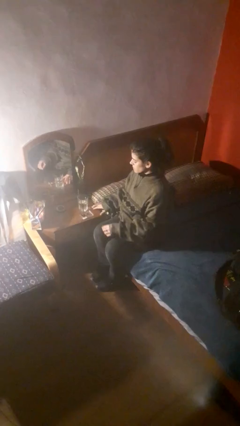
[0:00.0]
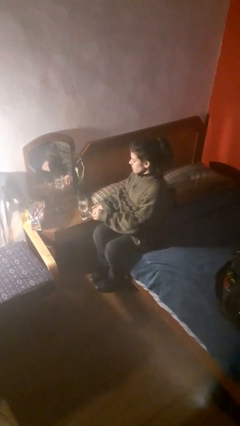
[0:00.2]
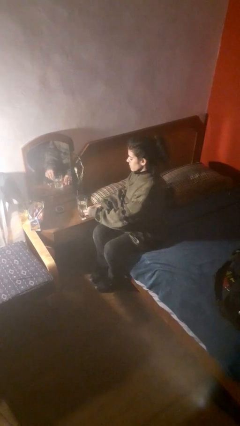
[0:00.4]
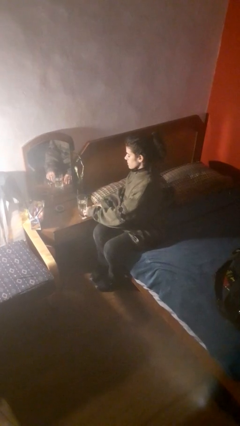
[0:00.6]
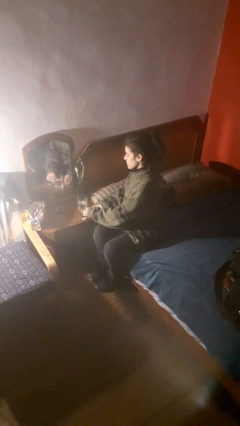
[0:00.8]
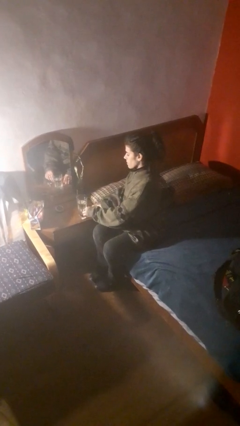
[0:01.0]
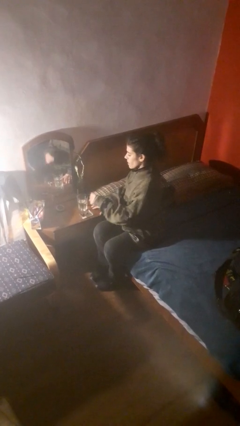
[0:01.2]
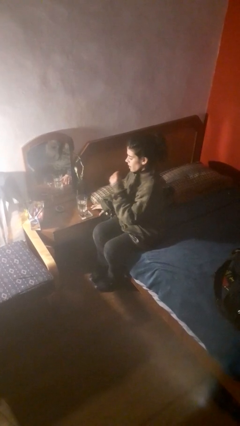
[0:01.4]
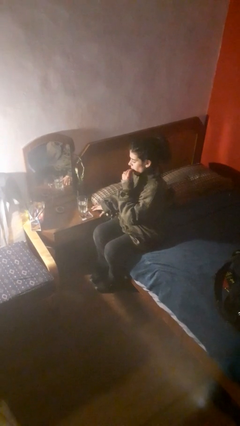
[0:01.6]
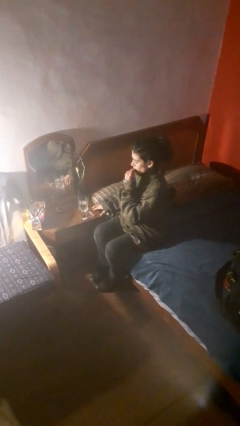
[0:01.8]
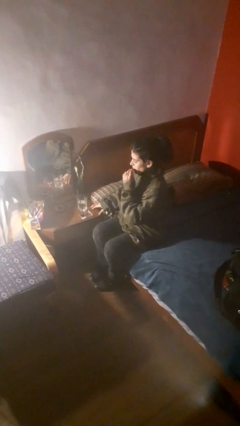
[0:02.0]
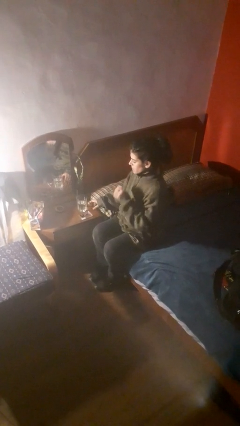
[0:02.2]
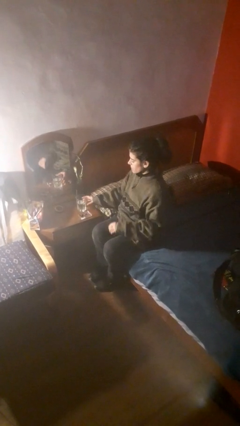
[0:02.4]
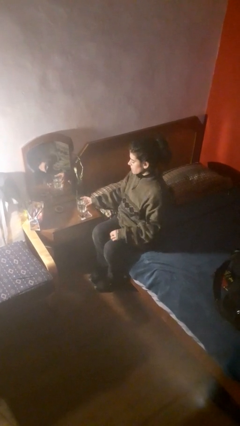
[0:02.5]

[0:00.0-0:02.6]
person takes medicine pills

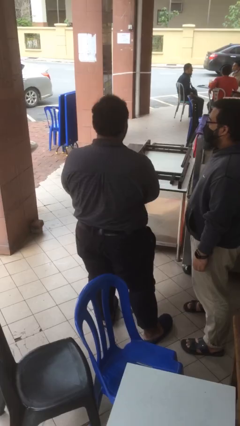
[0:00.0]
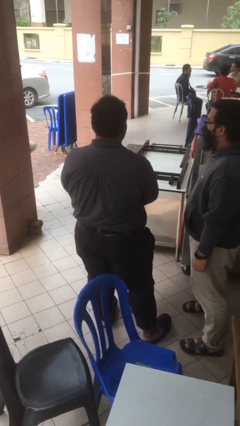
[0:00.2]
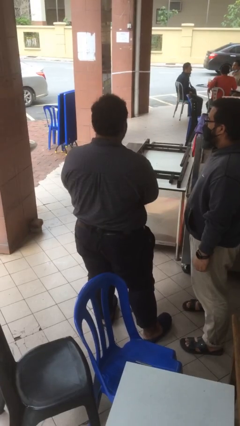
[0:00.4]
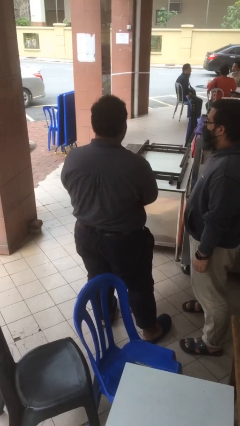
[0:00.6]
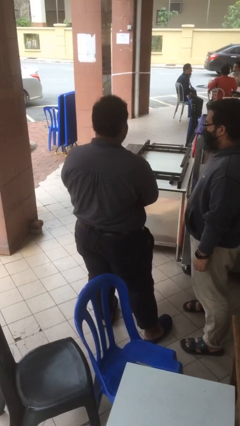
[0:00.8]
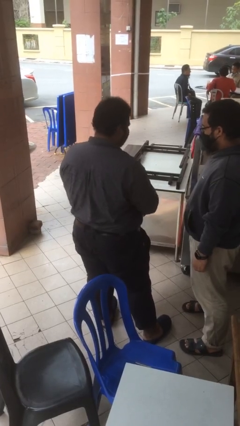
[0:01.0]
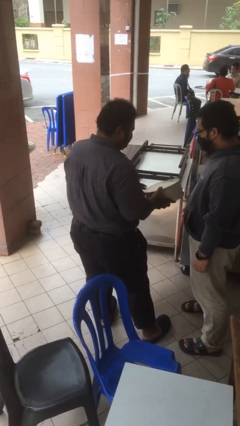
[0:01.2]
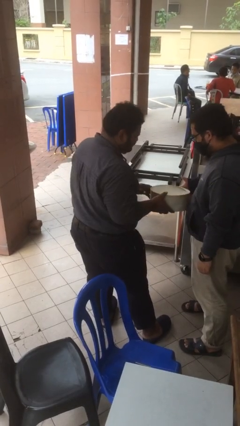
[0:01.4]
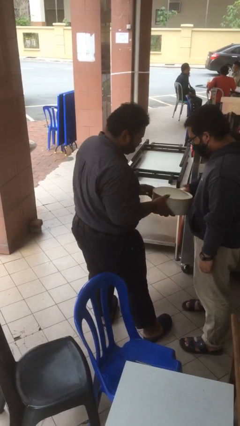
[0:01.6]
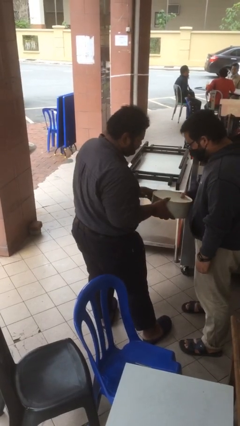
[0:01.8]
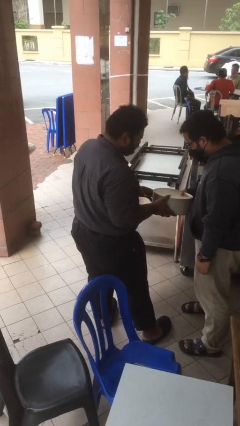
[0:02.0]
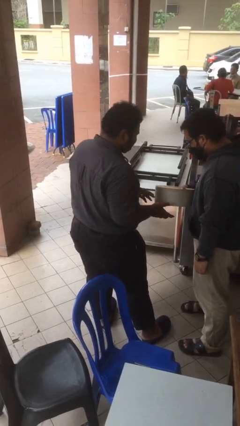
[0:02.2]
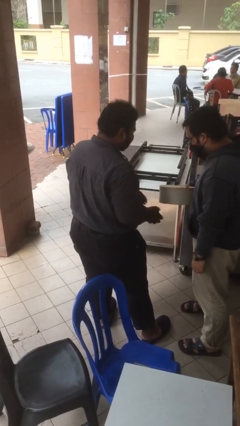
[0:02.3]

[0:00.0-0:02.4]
person transfers object to person

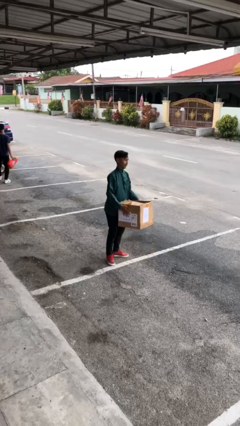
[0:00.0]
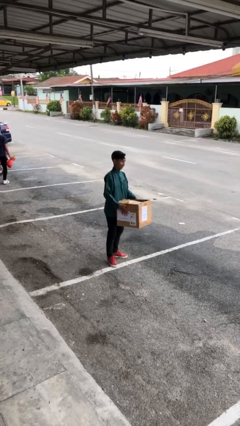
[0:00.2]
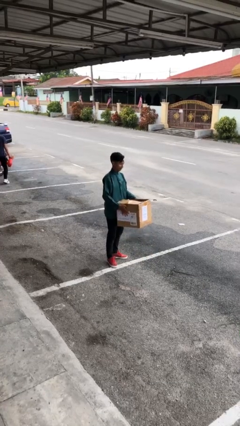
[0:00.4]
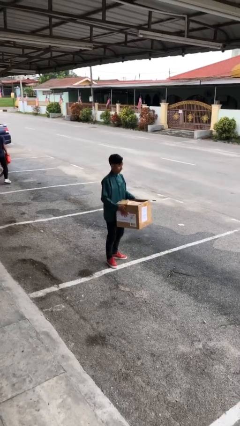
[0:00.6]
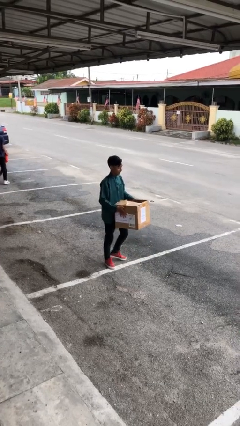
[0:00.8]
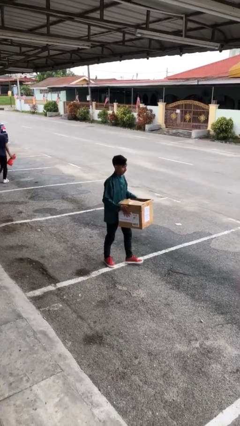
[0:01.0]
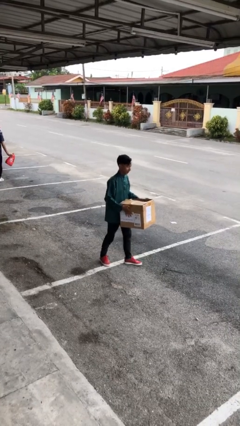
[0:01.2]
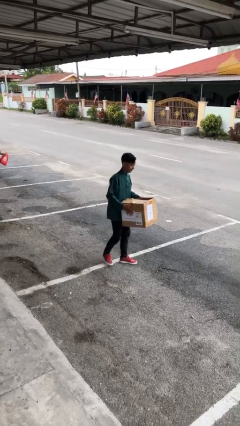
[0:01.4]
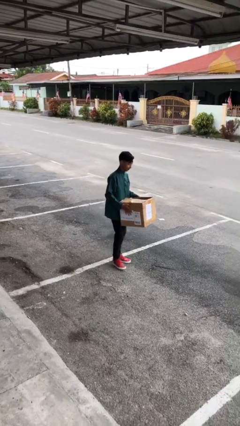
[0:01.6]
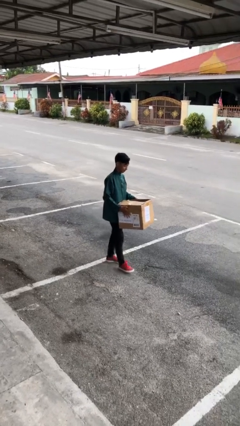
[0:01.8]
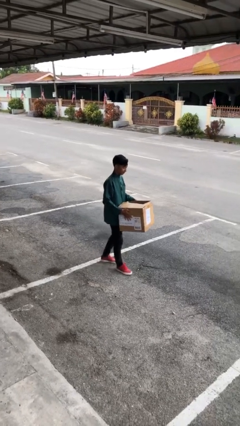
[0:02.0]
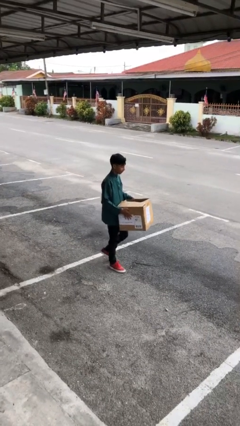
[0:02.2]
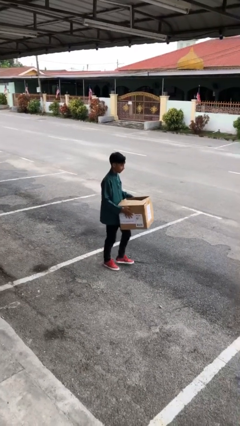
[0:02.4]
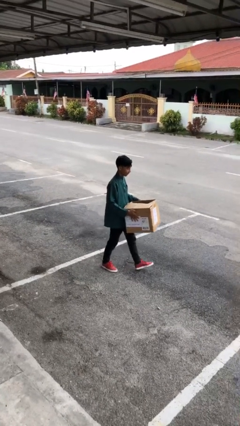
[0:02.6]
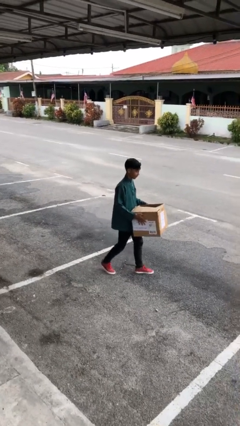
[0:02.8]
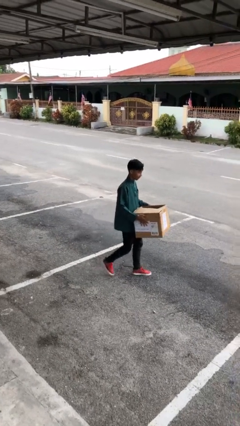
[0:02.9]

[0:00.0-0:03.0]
person carries heavy object

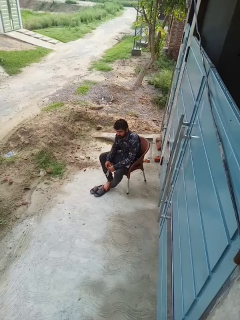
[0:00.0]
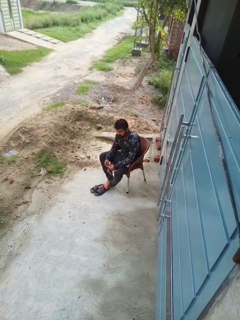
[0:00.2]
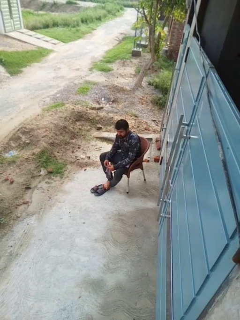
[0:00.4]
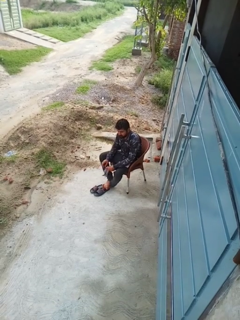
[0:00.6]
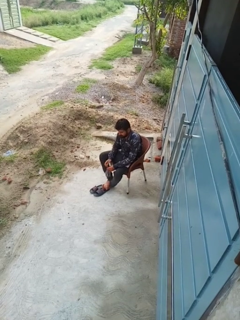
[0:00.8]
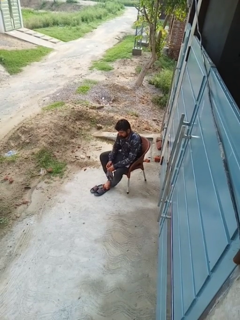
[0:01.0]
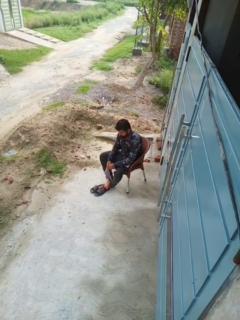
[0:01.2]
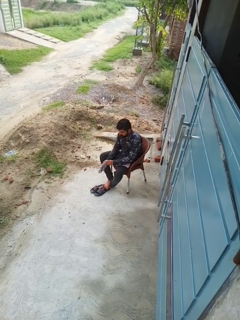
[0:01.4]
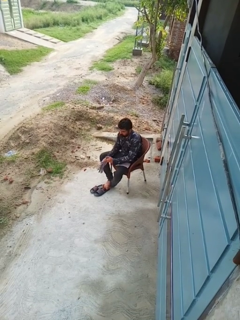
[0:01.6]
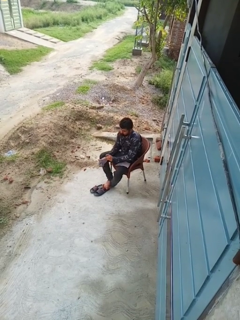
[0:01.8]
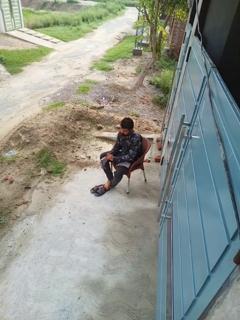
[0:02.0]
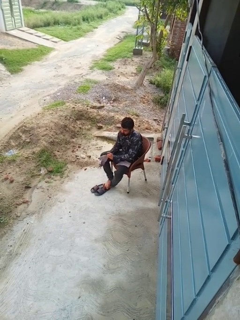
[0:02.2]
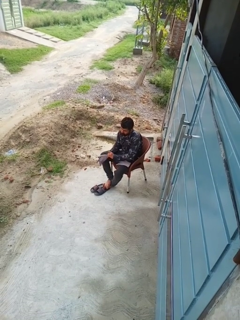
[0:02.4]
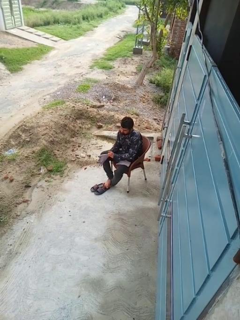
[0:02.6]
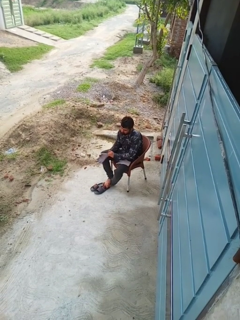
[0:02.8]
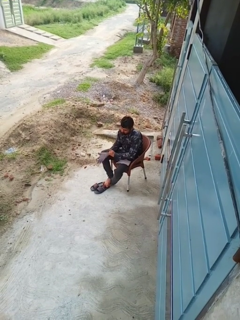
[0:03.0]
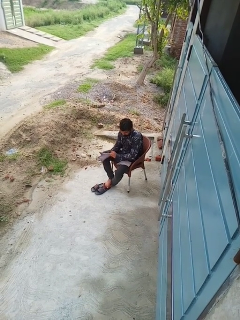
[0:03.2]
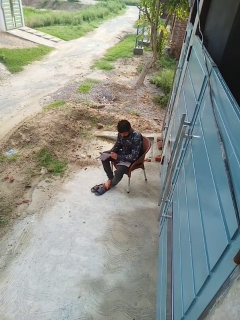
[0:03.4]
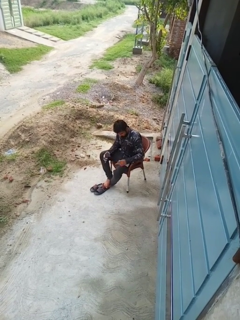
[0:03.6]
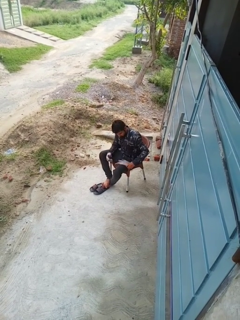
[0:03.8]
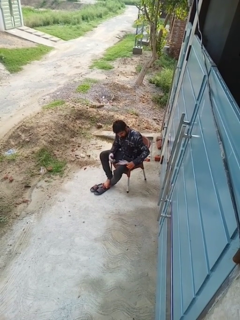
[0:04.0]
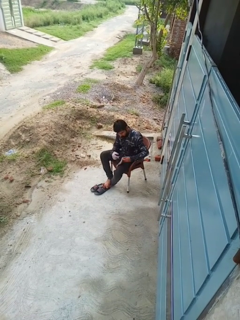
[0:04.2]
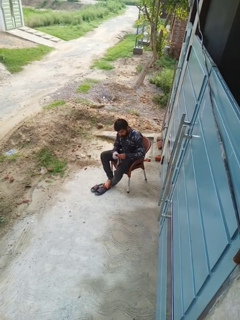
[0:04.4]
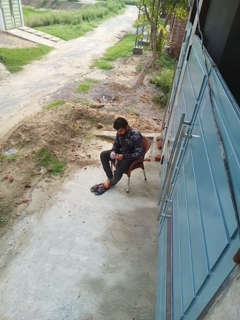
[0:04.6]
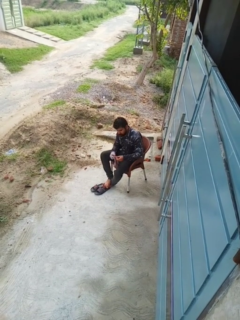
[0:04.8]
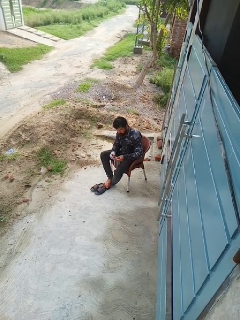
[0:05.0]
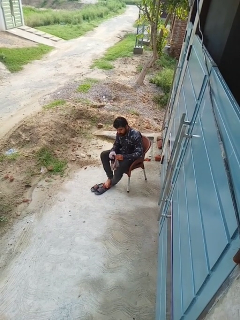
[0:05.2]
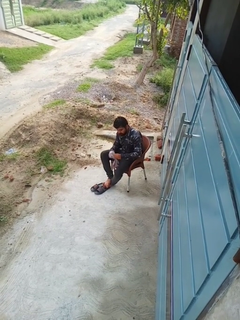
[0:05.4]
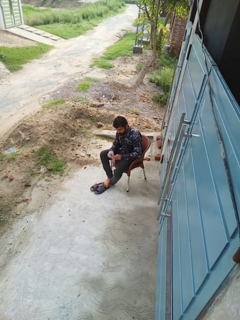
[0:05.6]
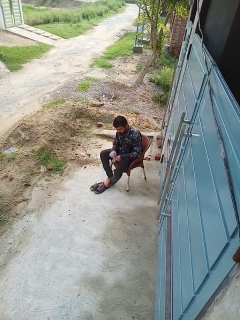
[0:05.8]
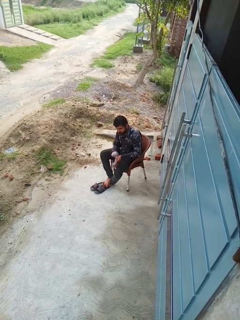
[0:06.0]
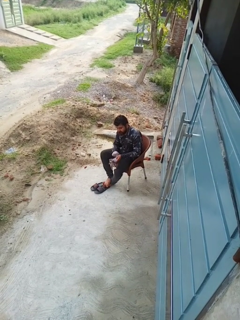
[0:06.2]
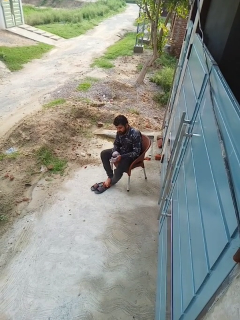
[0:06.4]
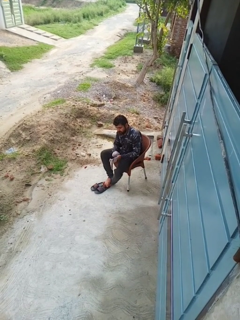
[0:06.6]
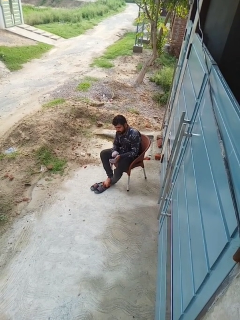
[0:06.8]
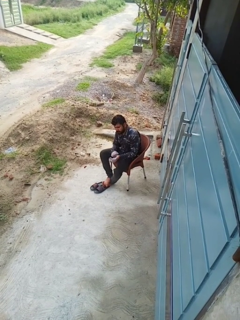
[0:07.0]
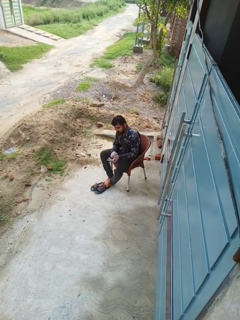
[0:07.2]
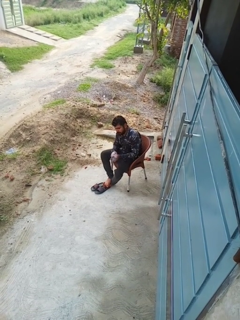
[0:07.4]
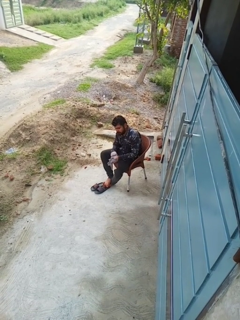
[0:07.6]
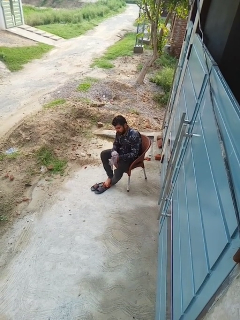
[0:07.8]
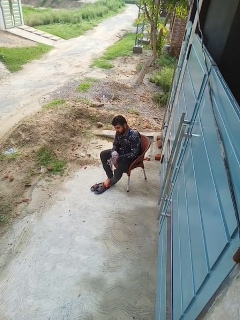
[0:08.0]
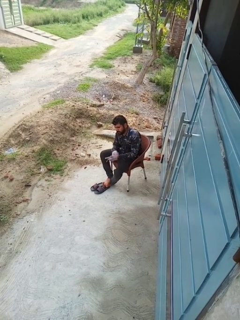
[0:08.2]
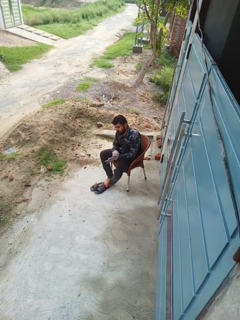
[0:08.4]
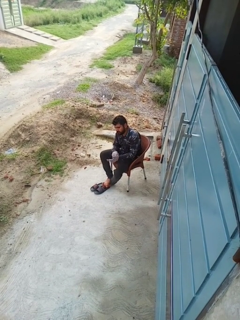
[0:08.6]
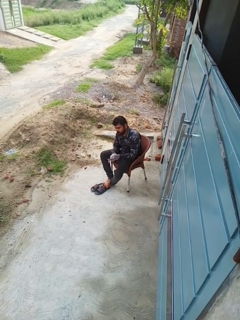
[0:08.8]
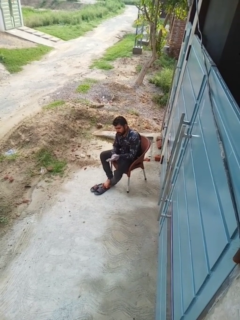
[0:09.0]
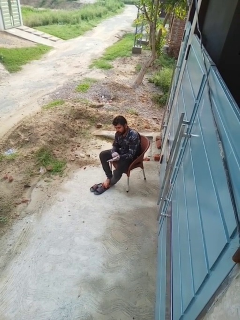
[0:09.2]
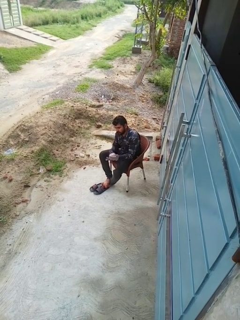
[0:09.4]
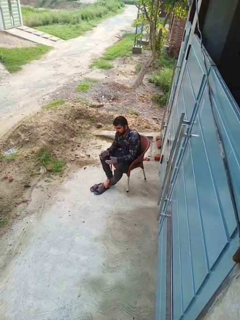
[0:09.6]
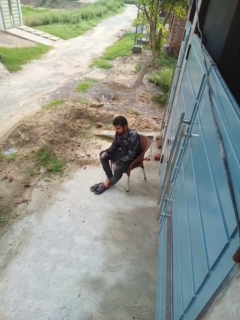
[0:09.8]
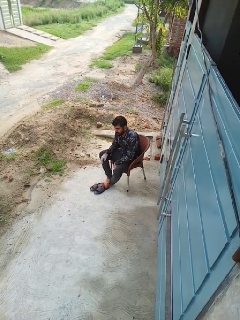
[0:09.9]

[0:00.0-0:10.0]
person puts on gloves

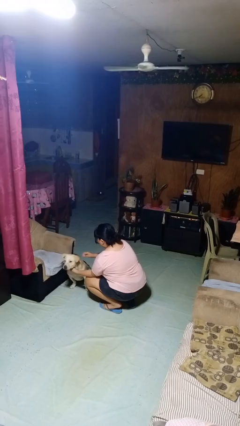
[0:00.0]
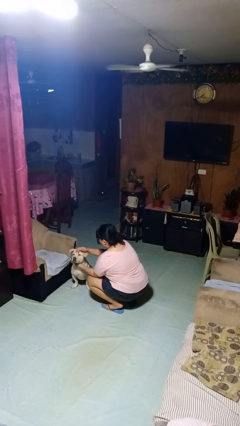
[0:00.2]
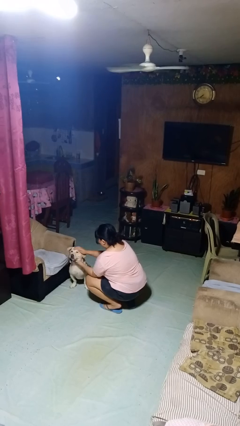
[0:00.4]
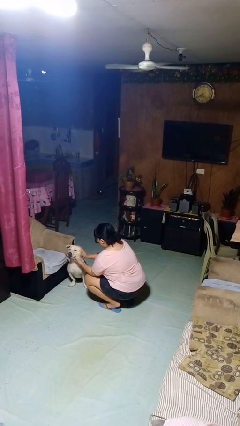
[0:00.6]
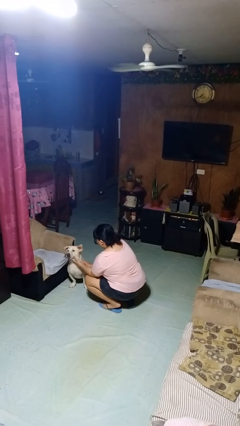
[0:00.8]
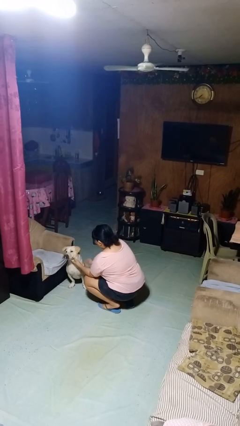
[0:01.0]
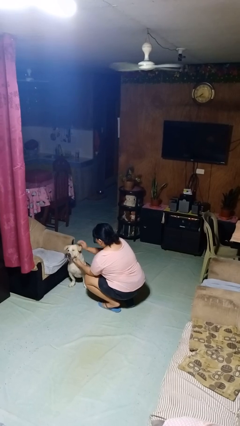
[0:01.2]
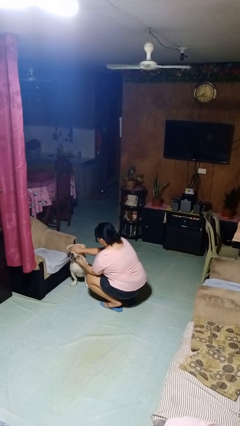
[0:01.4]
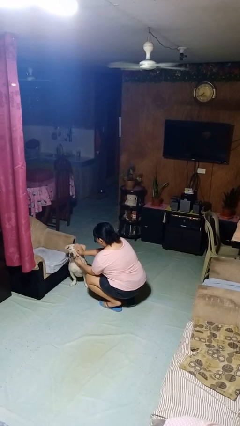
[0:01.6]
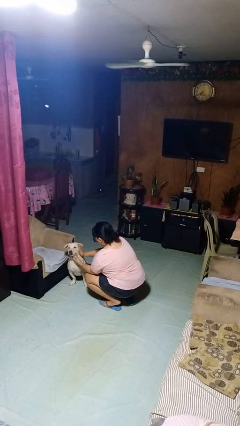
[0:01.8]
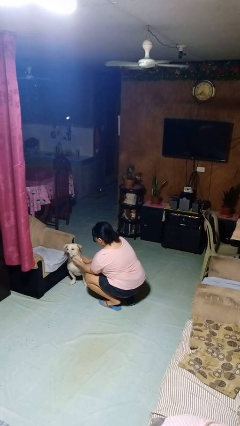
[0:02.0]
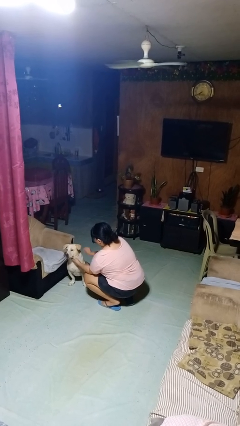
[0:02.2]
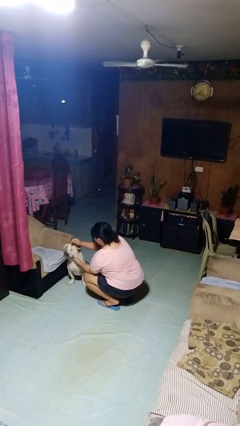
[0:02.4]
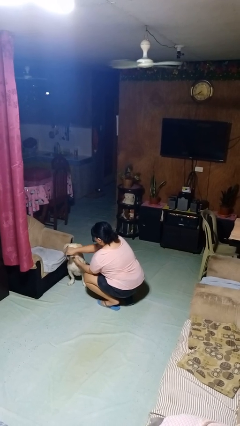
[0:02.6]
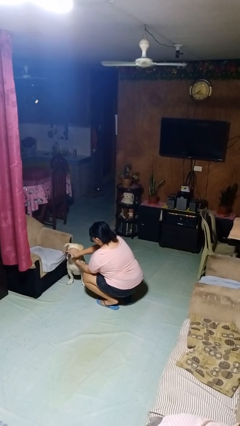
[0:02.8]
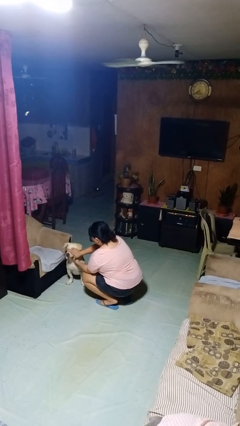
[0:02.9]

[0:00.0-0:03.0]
person pets dog
